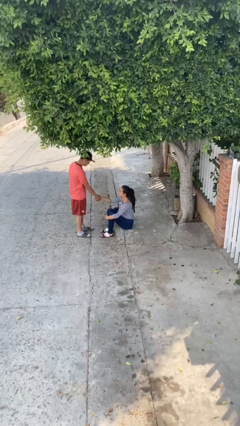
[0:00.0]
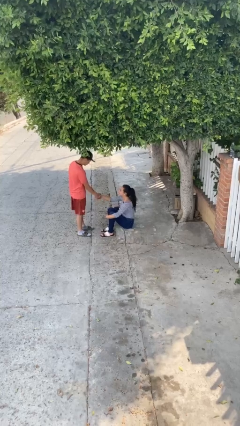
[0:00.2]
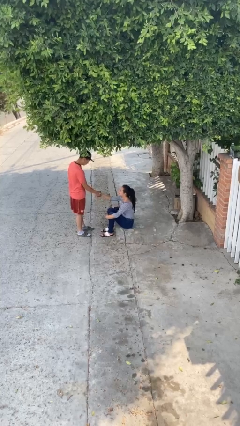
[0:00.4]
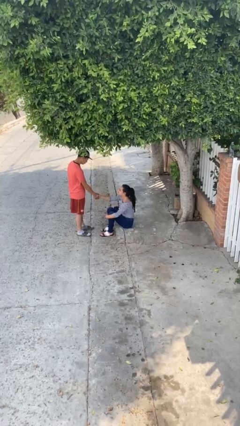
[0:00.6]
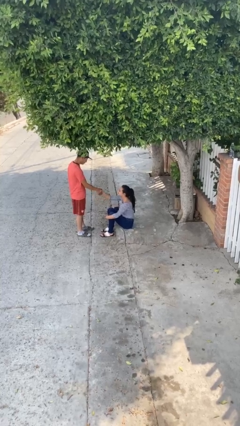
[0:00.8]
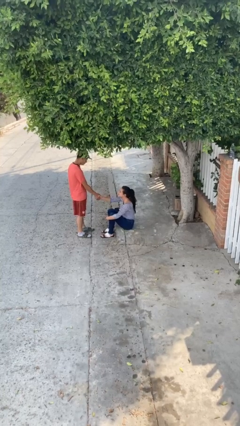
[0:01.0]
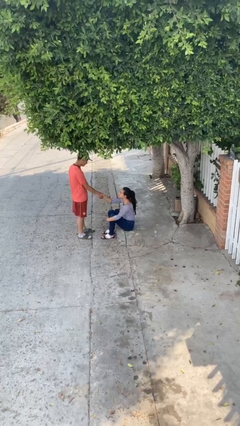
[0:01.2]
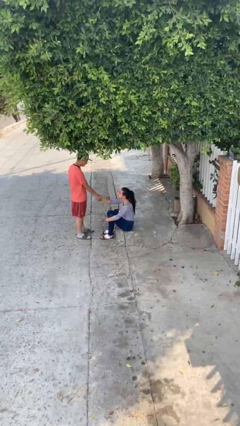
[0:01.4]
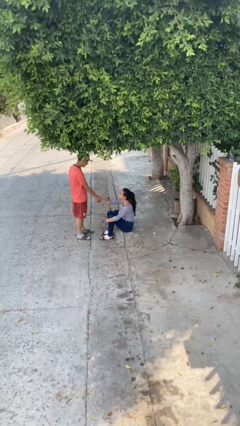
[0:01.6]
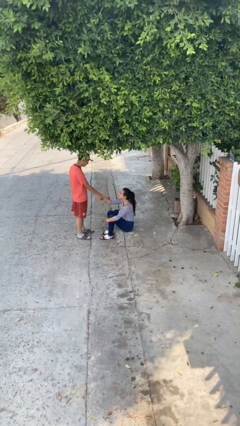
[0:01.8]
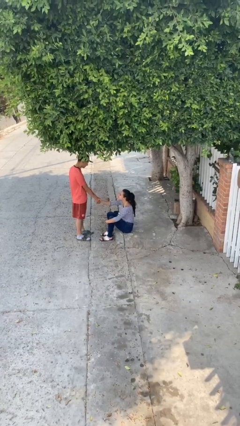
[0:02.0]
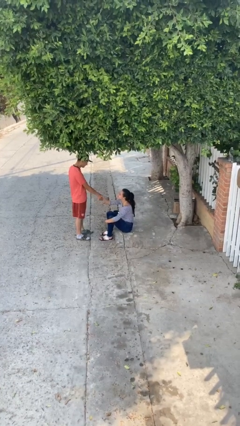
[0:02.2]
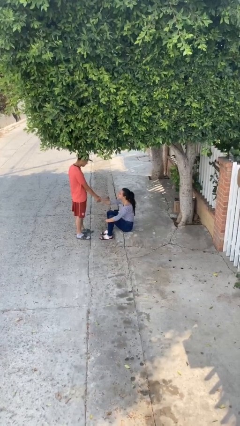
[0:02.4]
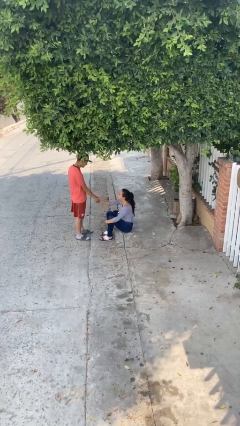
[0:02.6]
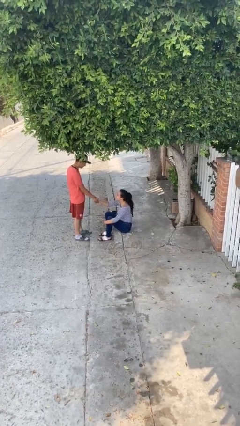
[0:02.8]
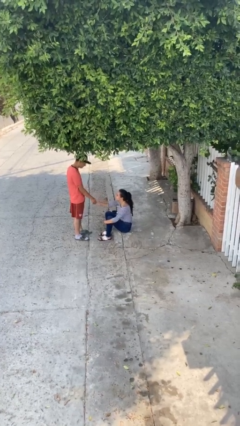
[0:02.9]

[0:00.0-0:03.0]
person shakes hand

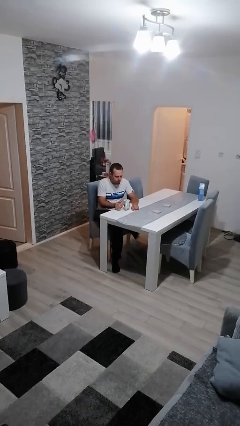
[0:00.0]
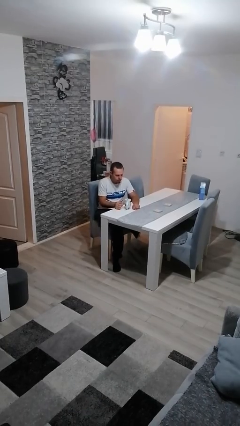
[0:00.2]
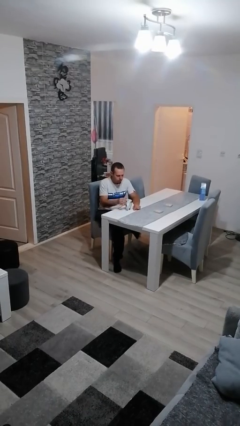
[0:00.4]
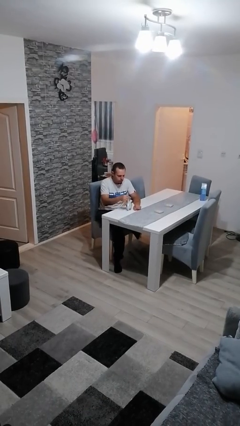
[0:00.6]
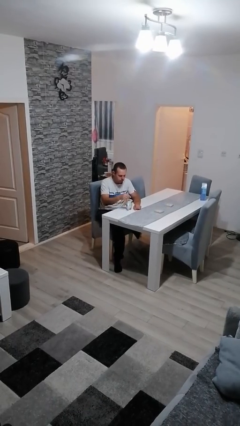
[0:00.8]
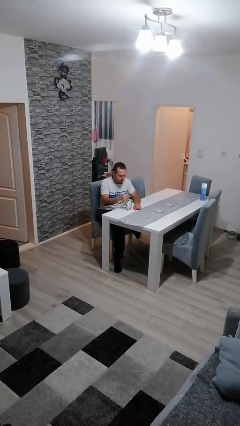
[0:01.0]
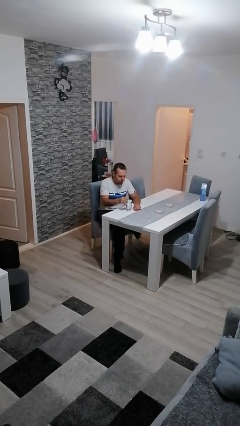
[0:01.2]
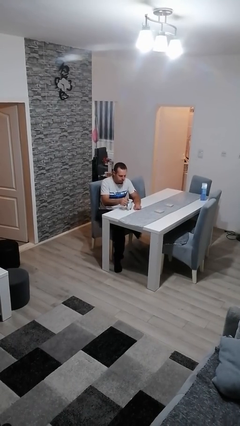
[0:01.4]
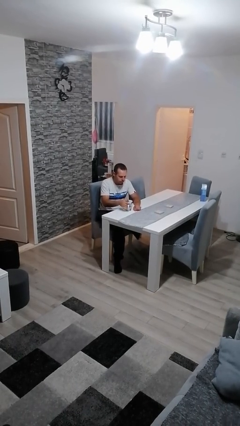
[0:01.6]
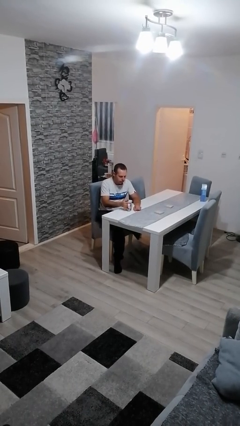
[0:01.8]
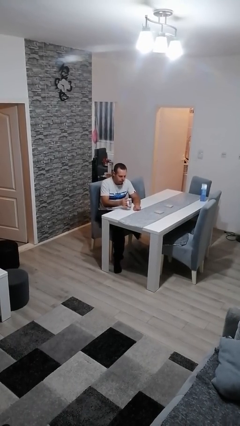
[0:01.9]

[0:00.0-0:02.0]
person stirs mug

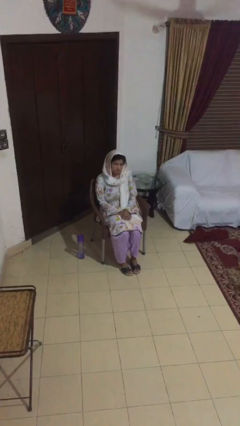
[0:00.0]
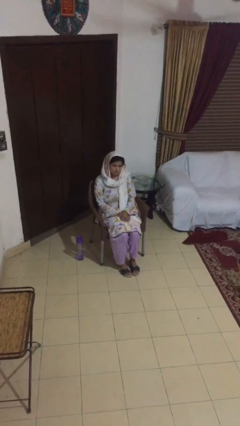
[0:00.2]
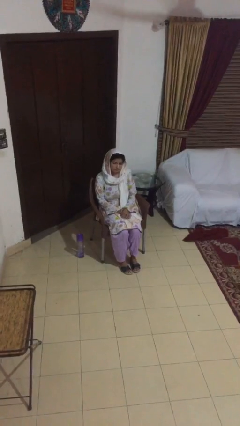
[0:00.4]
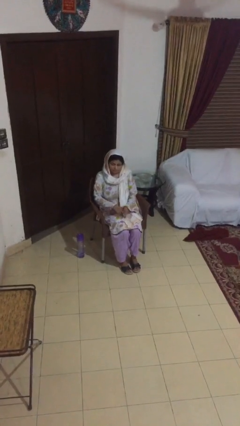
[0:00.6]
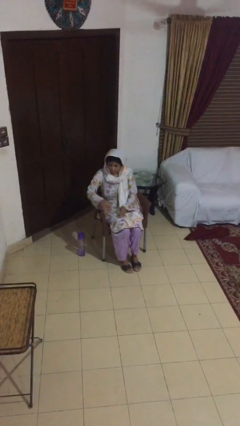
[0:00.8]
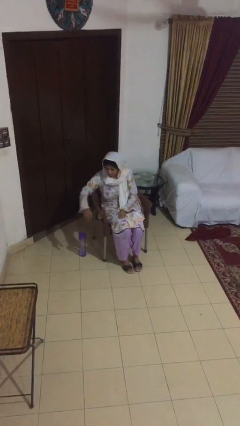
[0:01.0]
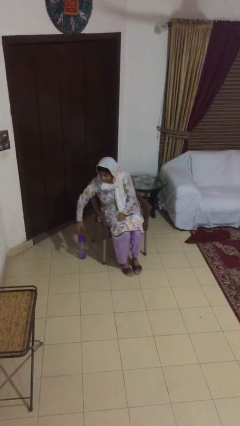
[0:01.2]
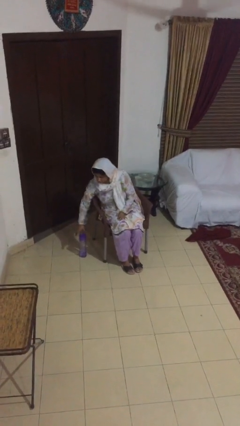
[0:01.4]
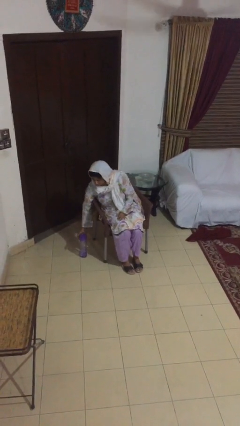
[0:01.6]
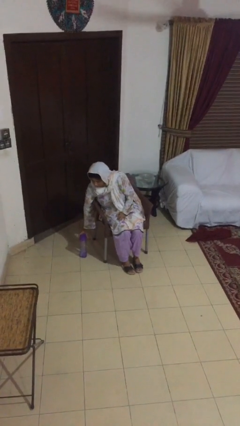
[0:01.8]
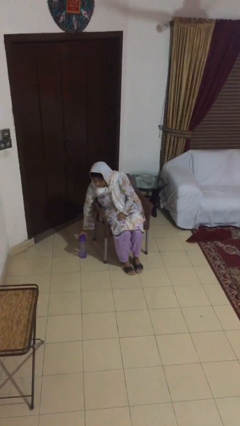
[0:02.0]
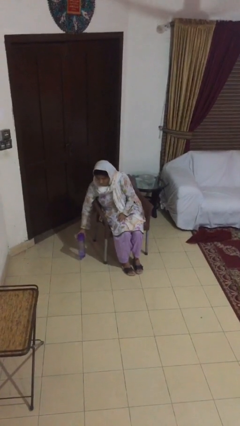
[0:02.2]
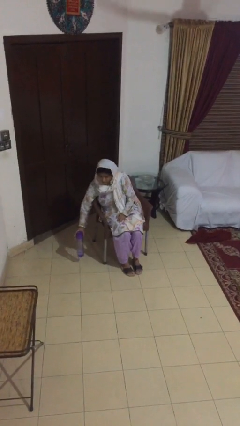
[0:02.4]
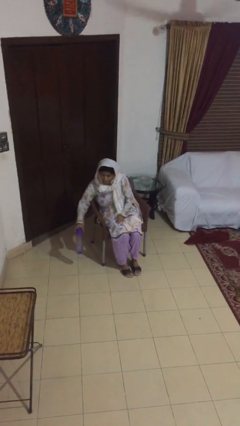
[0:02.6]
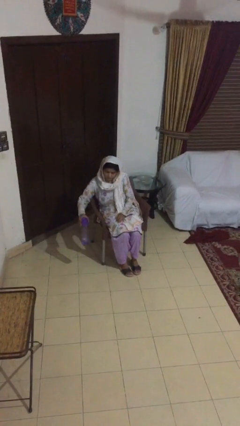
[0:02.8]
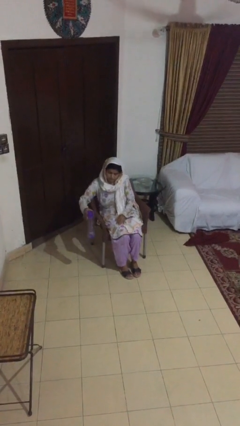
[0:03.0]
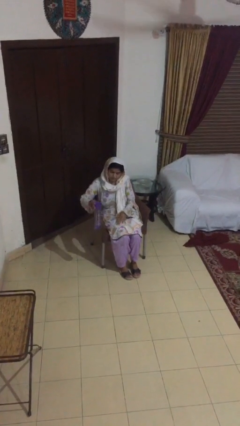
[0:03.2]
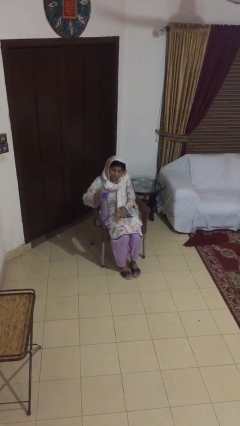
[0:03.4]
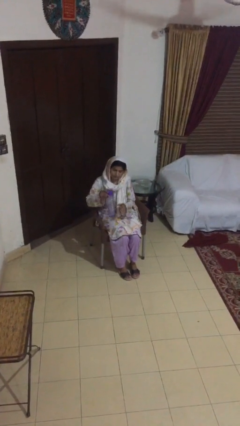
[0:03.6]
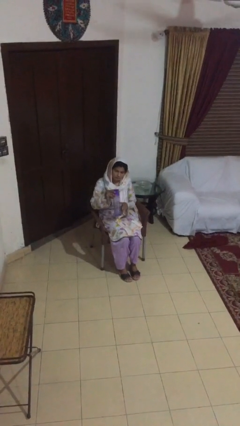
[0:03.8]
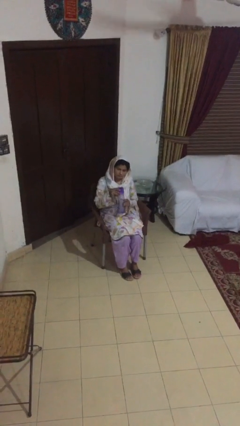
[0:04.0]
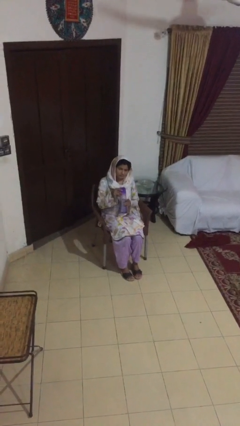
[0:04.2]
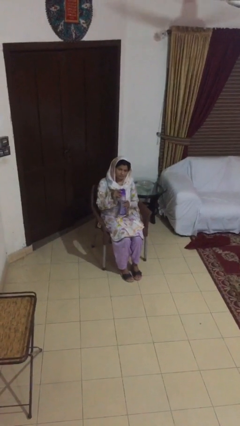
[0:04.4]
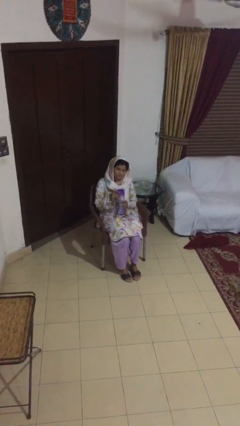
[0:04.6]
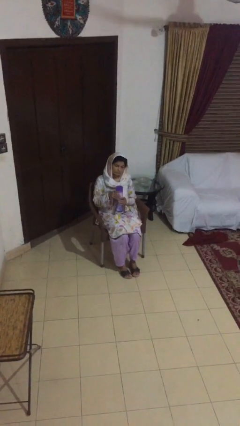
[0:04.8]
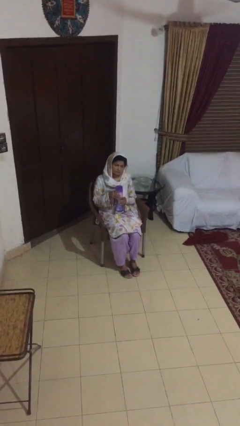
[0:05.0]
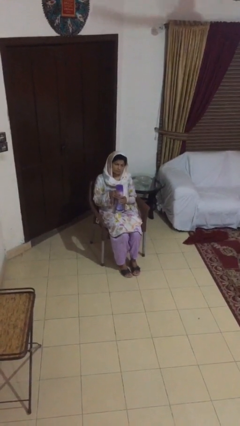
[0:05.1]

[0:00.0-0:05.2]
person picks up object from floor

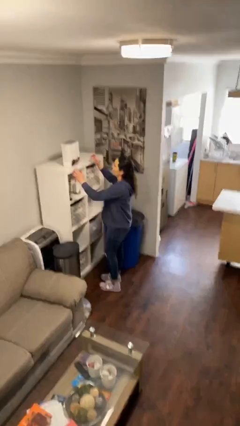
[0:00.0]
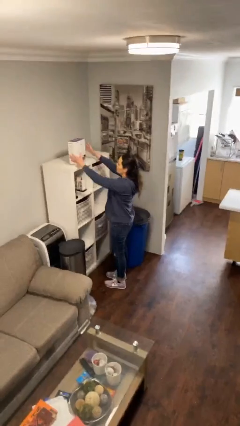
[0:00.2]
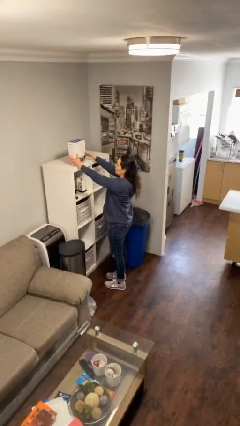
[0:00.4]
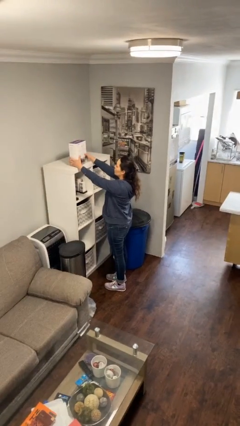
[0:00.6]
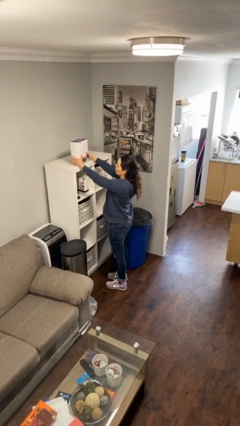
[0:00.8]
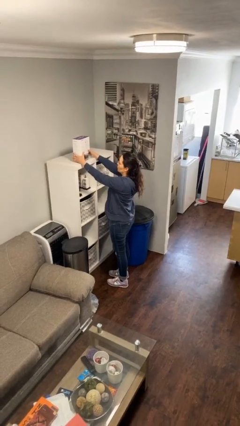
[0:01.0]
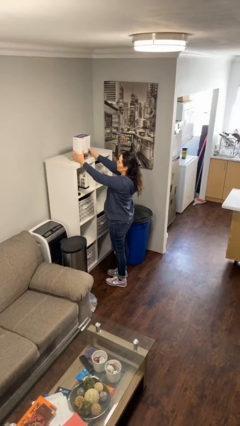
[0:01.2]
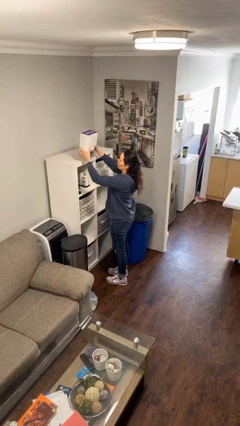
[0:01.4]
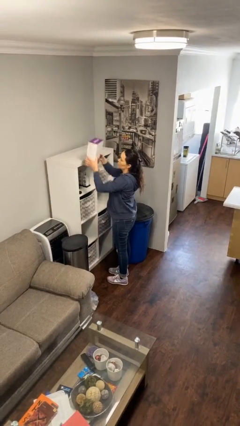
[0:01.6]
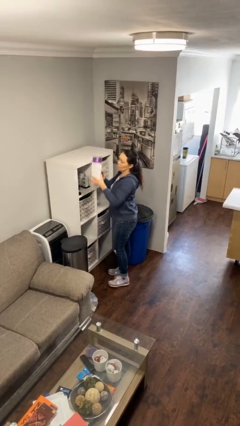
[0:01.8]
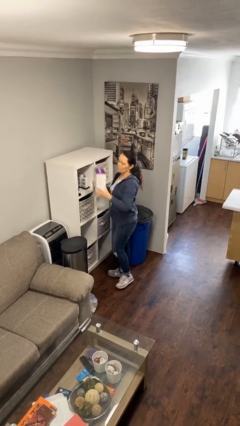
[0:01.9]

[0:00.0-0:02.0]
person picks up object from shelf

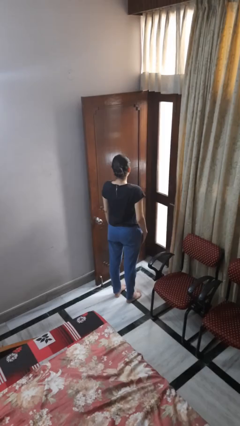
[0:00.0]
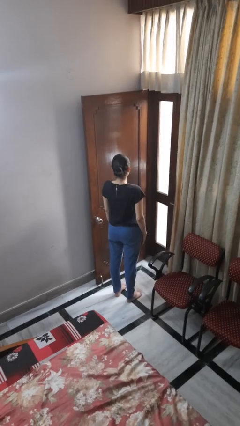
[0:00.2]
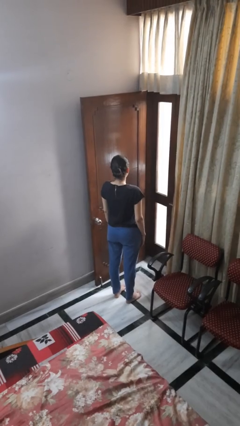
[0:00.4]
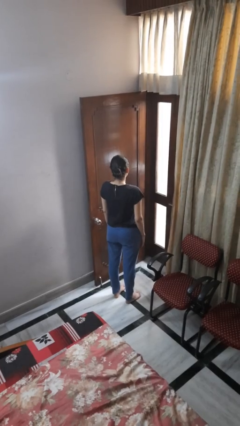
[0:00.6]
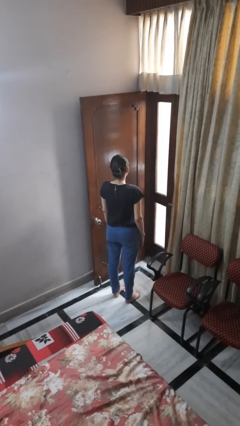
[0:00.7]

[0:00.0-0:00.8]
person slaps hands on thighs

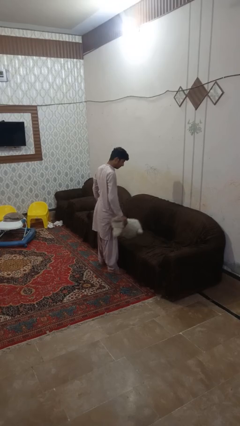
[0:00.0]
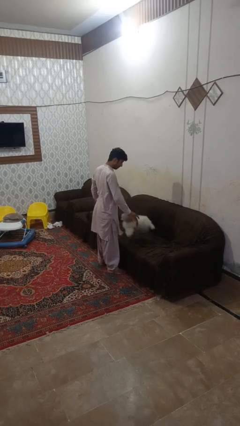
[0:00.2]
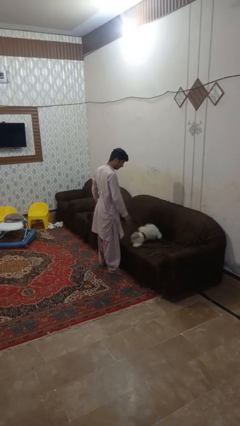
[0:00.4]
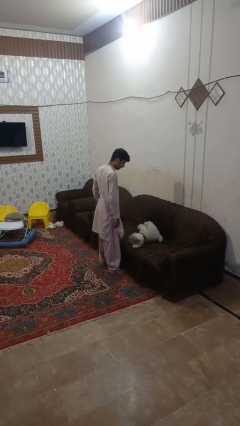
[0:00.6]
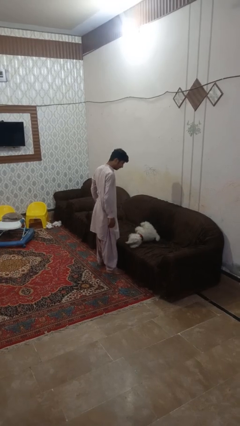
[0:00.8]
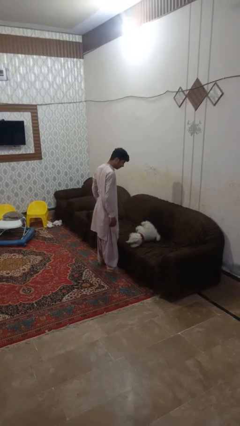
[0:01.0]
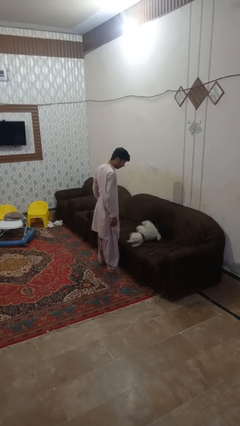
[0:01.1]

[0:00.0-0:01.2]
person puts down object on couch

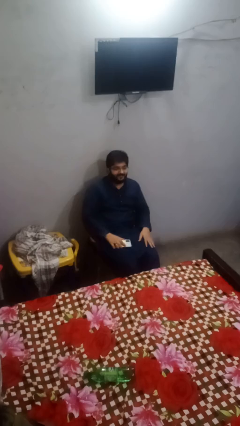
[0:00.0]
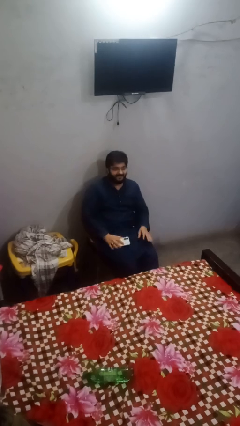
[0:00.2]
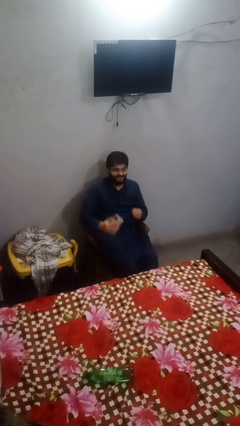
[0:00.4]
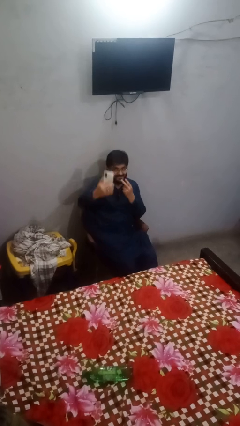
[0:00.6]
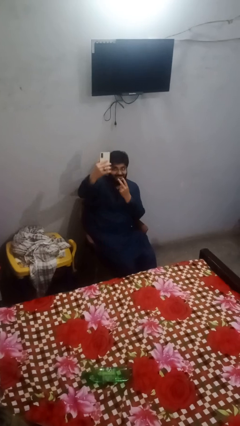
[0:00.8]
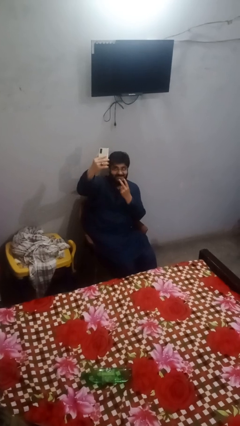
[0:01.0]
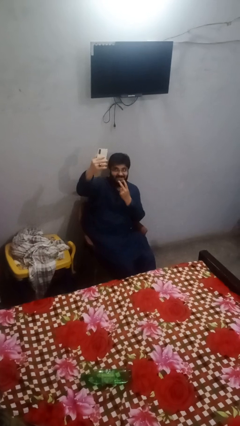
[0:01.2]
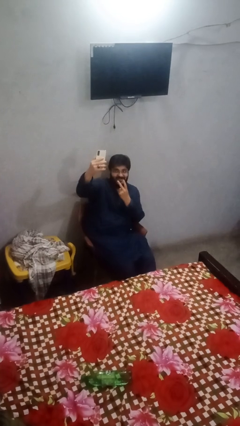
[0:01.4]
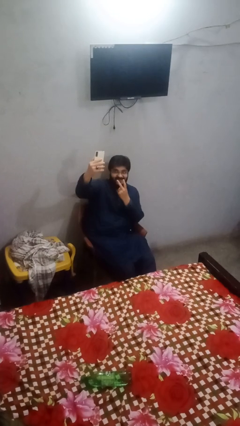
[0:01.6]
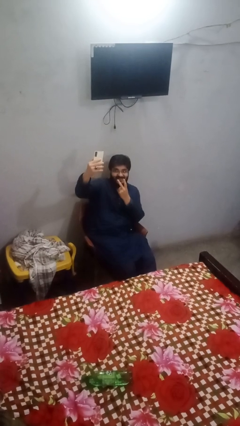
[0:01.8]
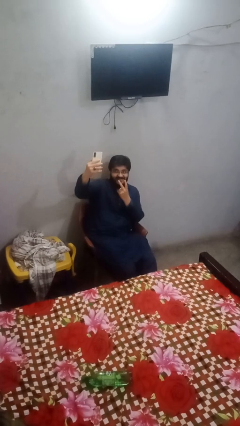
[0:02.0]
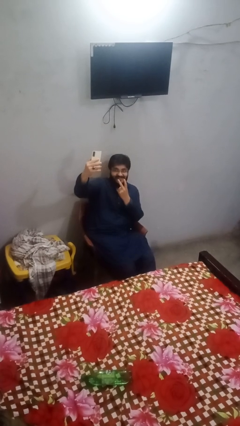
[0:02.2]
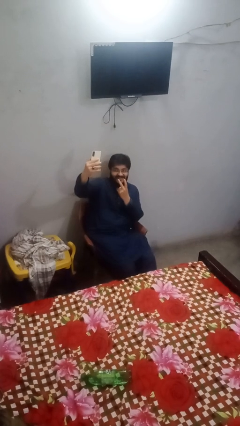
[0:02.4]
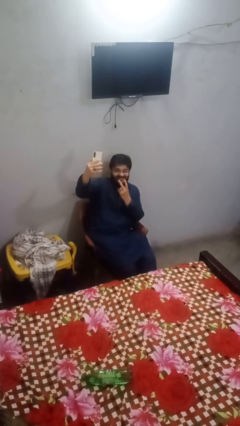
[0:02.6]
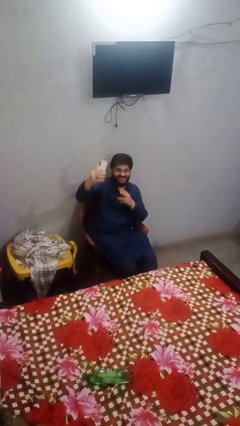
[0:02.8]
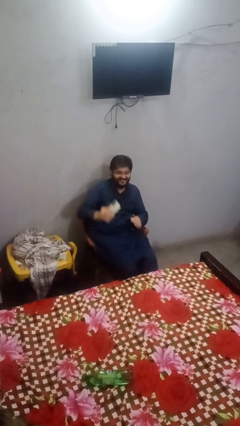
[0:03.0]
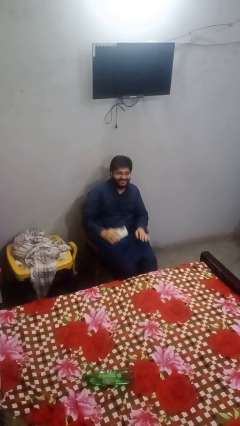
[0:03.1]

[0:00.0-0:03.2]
person takes selfie

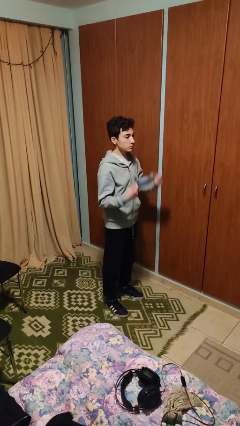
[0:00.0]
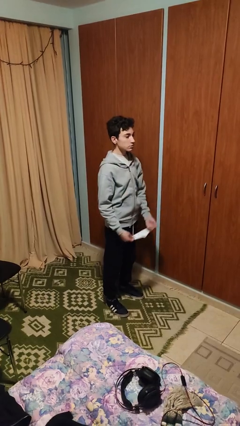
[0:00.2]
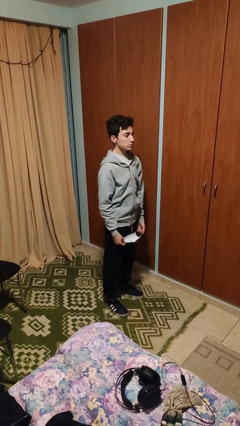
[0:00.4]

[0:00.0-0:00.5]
person takes off facemask
